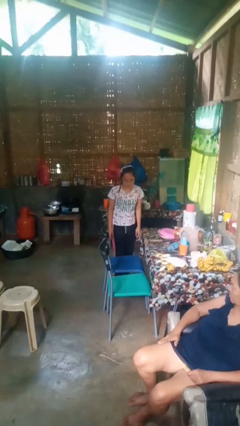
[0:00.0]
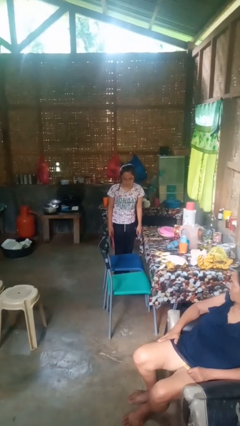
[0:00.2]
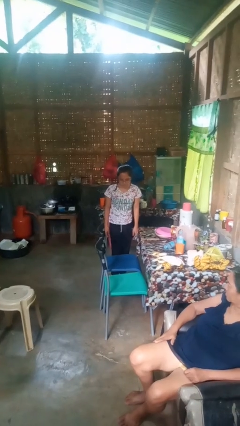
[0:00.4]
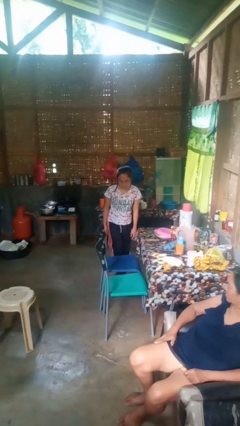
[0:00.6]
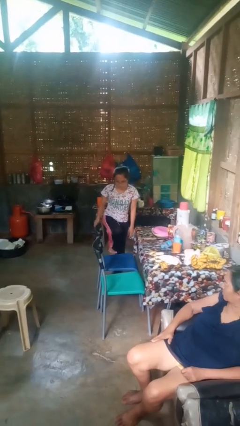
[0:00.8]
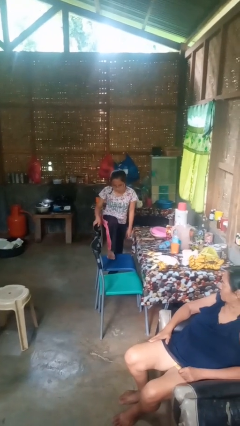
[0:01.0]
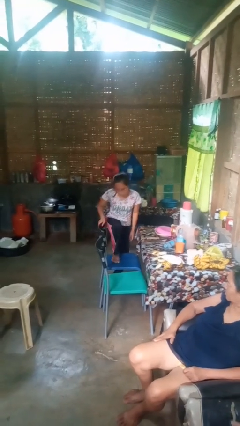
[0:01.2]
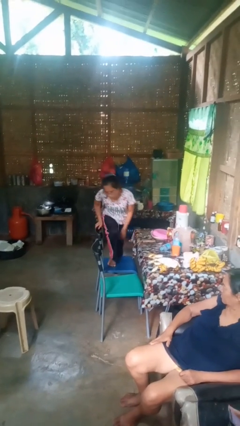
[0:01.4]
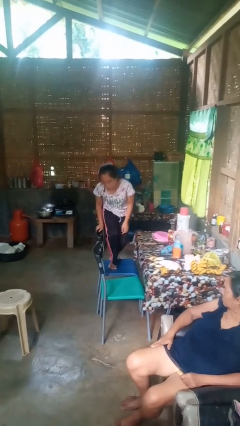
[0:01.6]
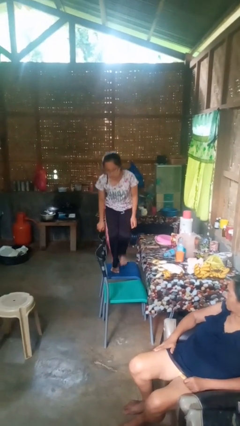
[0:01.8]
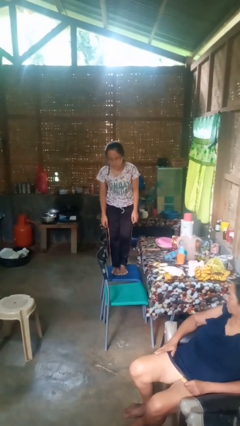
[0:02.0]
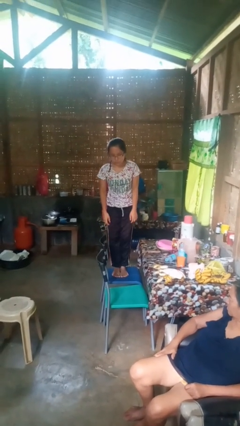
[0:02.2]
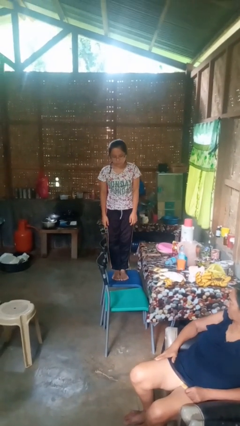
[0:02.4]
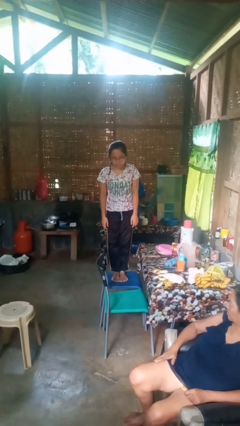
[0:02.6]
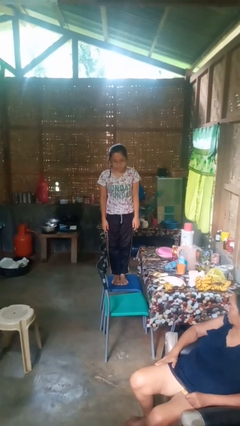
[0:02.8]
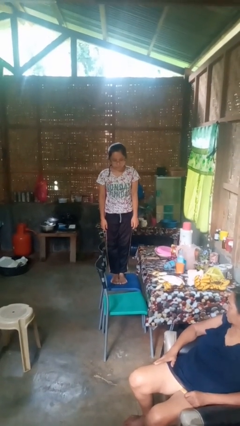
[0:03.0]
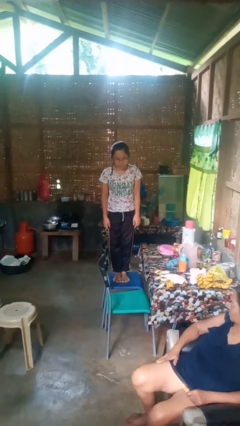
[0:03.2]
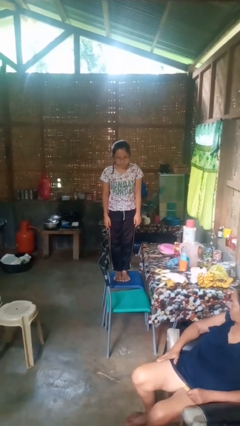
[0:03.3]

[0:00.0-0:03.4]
person climbs on chair

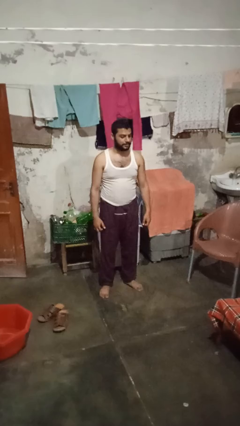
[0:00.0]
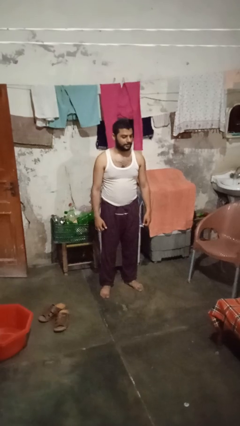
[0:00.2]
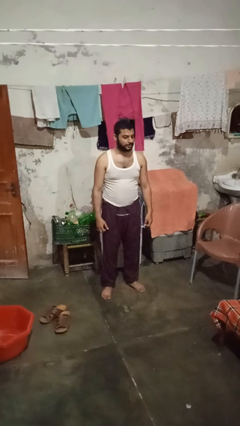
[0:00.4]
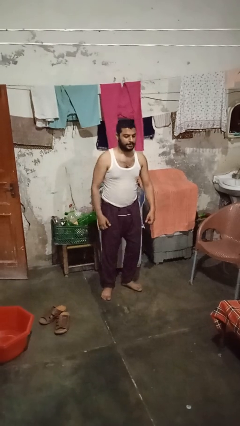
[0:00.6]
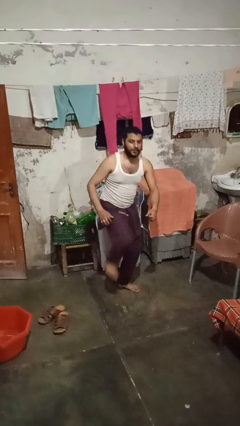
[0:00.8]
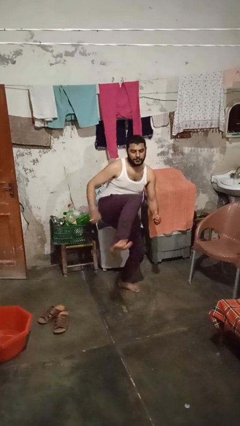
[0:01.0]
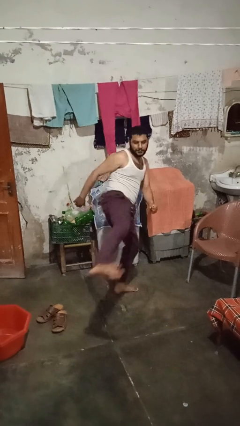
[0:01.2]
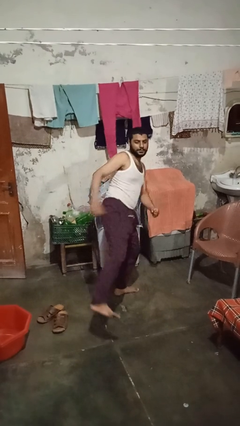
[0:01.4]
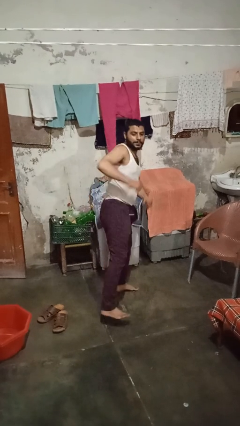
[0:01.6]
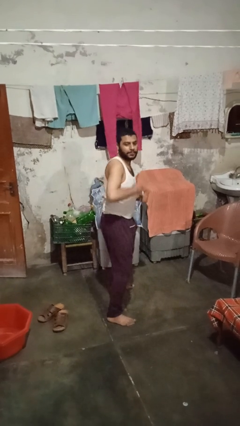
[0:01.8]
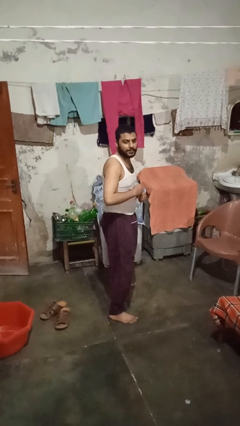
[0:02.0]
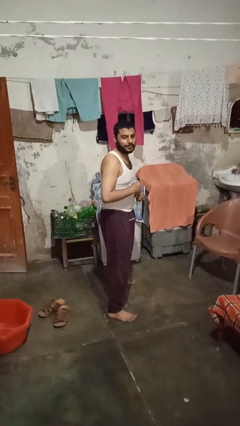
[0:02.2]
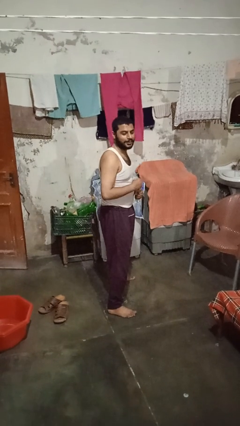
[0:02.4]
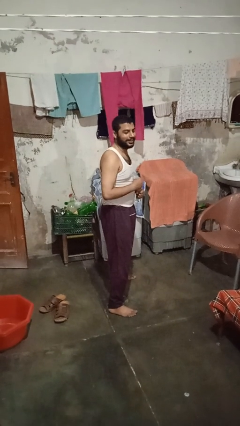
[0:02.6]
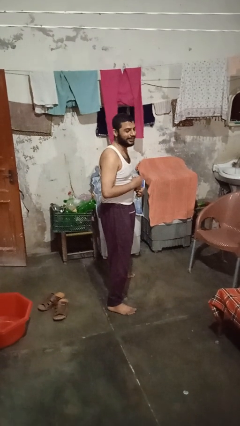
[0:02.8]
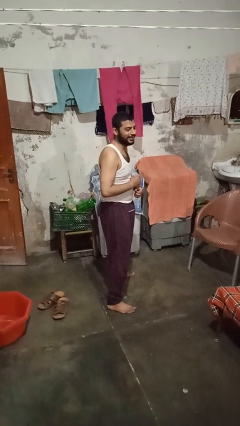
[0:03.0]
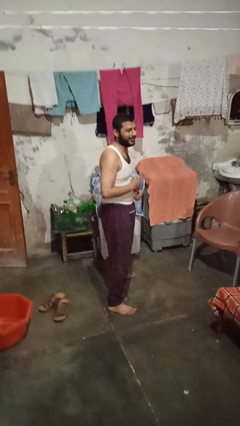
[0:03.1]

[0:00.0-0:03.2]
person karate kicks

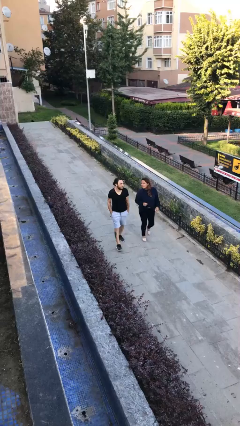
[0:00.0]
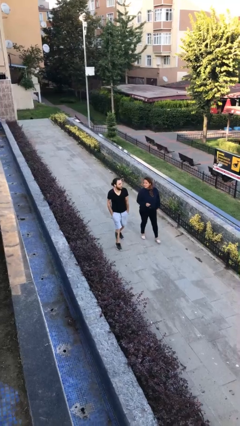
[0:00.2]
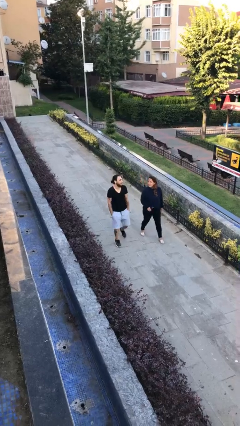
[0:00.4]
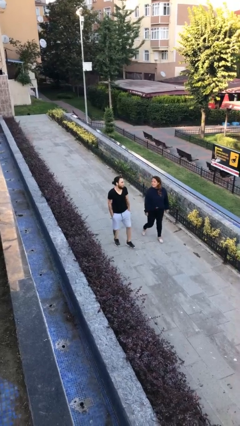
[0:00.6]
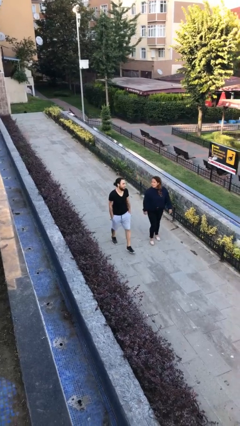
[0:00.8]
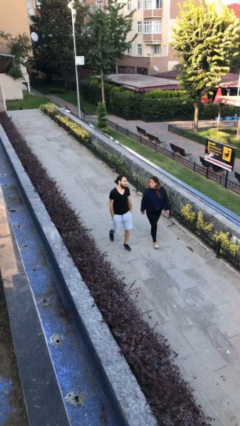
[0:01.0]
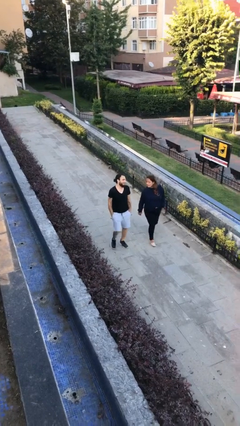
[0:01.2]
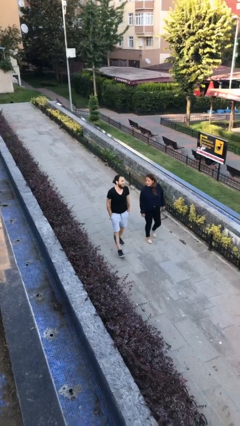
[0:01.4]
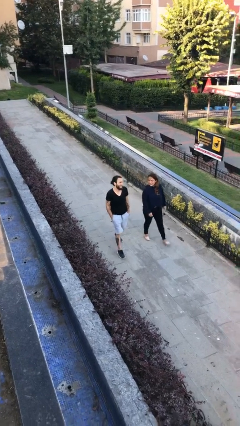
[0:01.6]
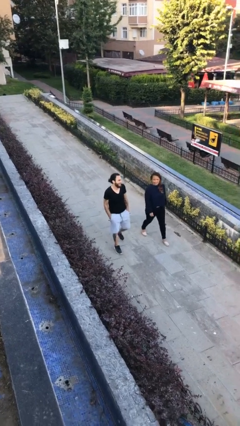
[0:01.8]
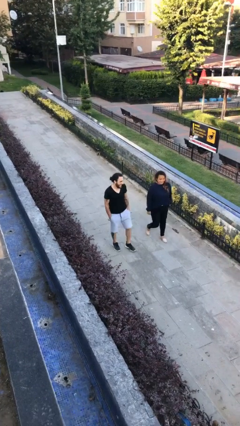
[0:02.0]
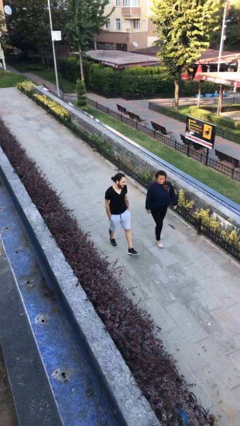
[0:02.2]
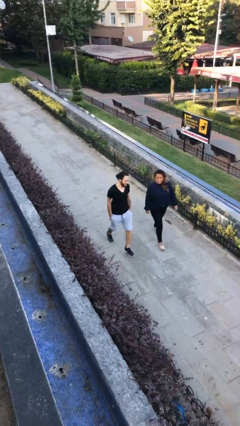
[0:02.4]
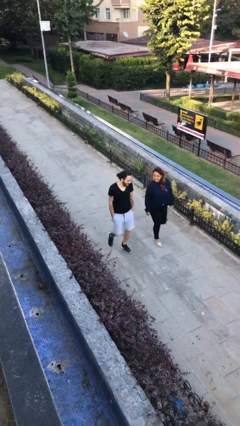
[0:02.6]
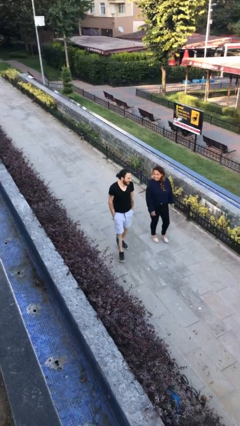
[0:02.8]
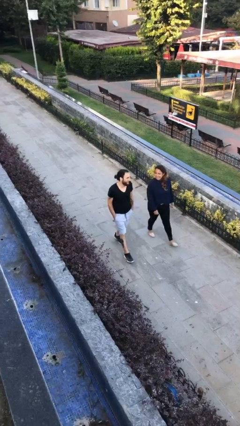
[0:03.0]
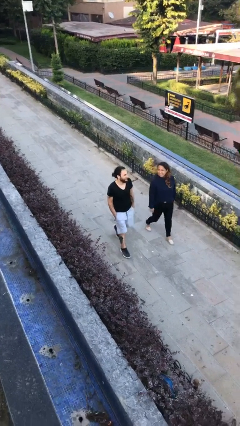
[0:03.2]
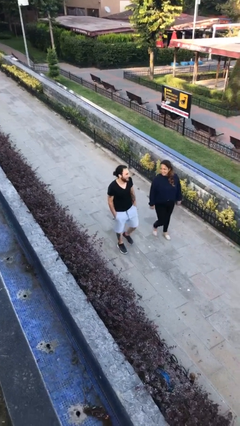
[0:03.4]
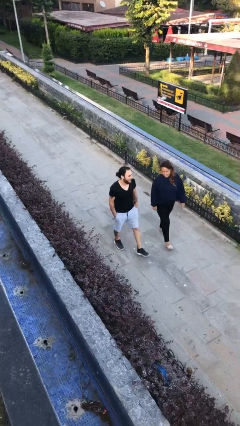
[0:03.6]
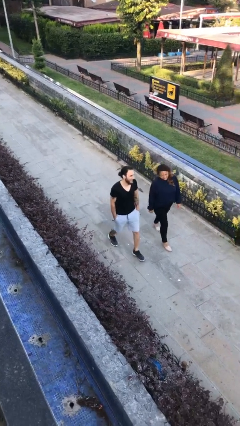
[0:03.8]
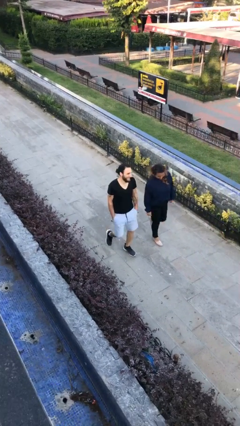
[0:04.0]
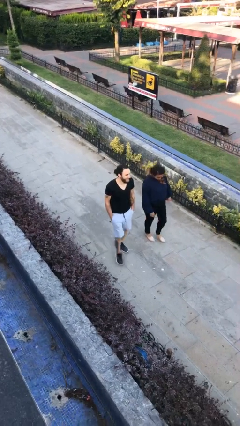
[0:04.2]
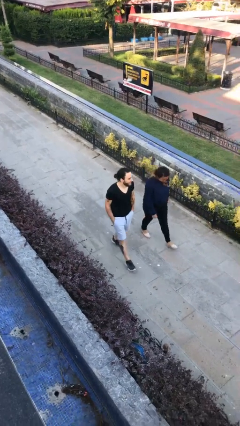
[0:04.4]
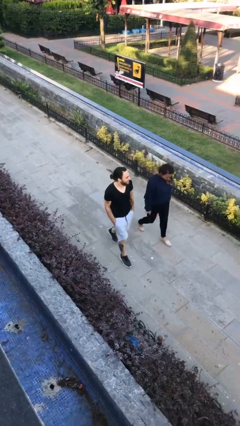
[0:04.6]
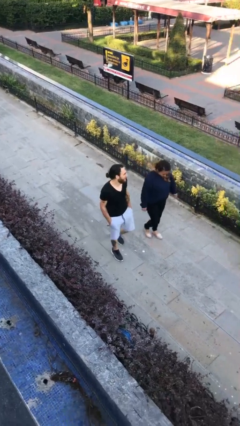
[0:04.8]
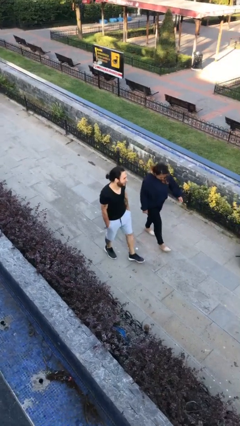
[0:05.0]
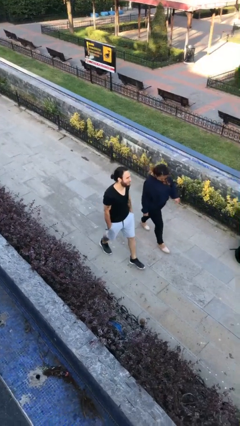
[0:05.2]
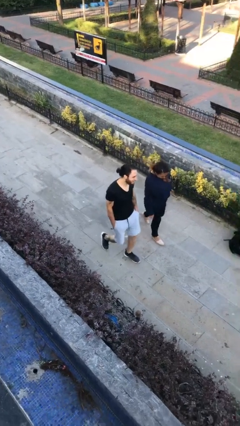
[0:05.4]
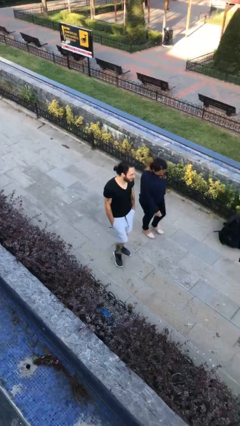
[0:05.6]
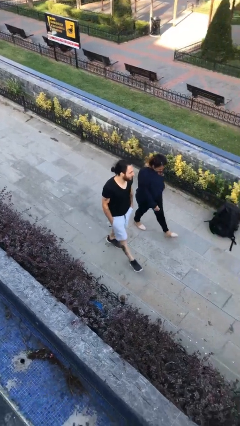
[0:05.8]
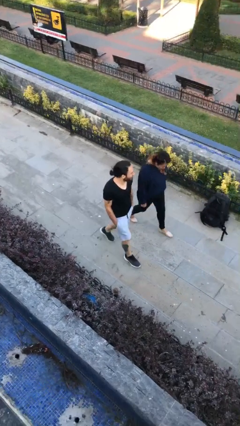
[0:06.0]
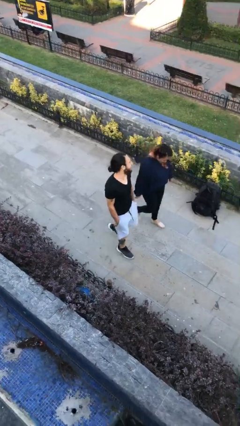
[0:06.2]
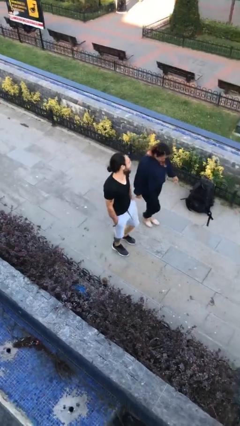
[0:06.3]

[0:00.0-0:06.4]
person talks to person

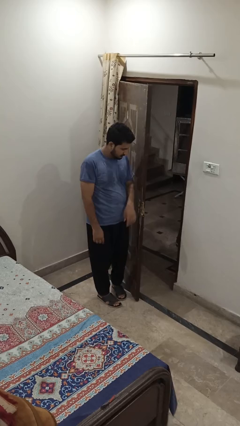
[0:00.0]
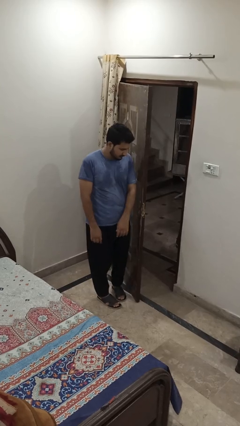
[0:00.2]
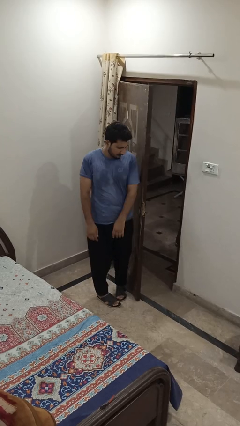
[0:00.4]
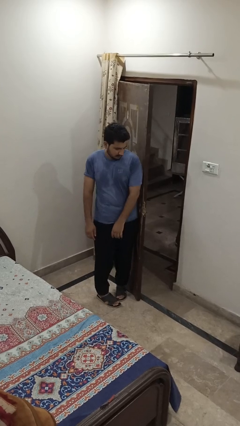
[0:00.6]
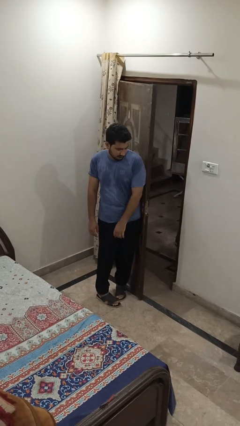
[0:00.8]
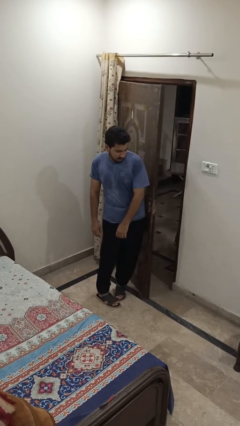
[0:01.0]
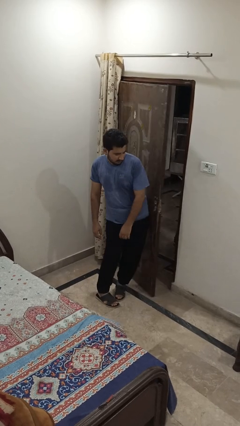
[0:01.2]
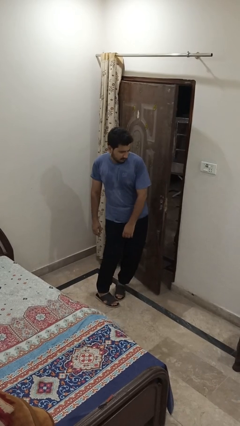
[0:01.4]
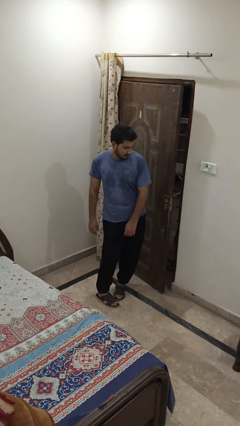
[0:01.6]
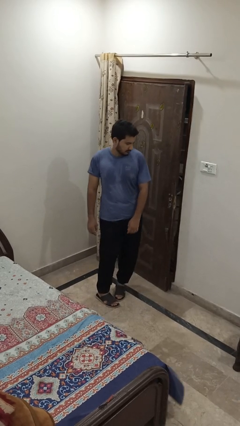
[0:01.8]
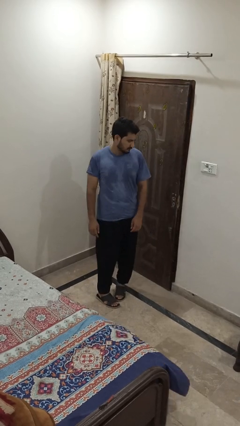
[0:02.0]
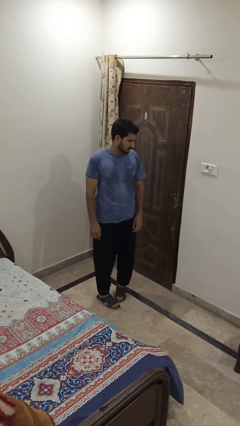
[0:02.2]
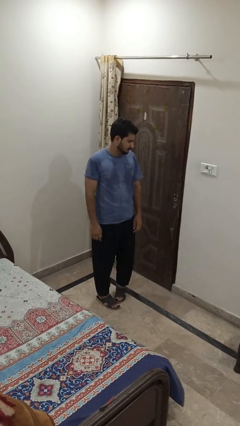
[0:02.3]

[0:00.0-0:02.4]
person closes door with hip

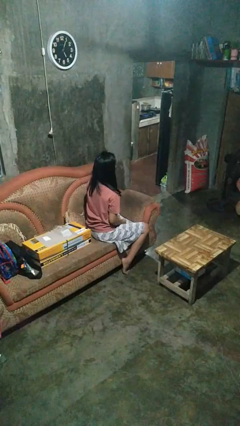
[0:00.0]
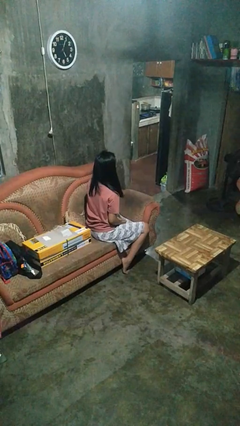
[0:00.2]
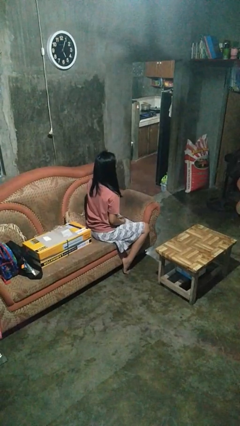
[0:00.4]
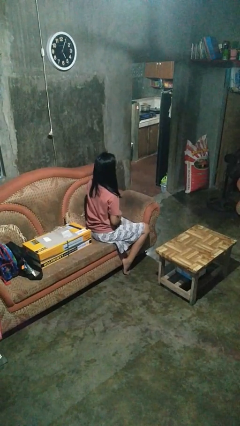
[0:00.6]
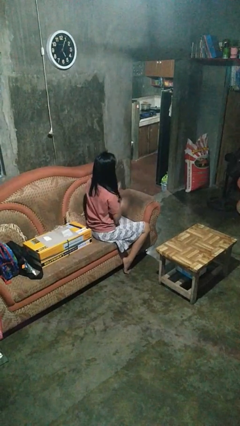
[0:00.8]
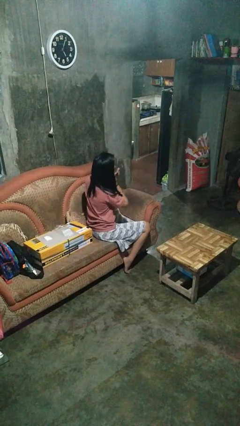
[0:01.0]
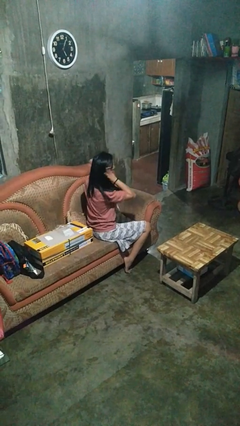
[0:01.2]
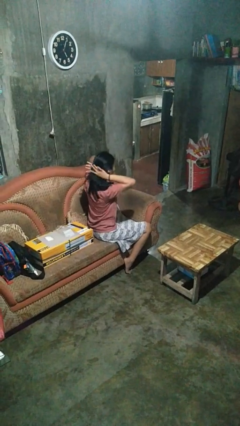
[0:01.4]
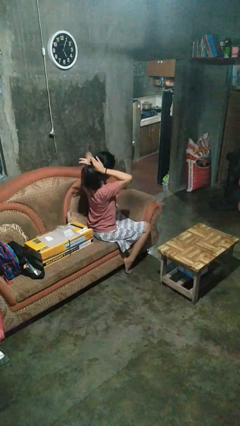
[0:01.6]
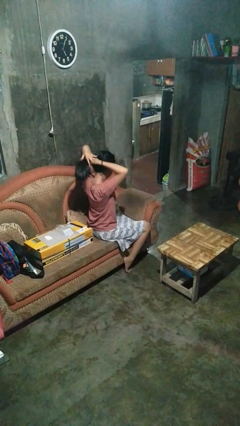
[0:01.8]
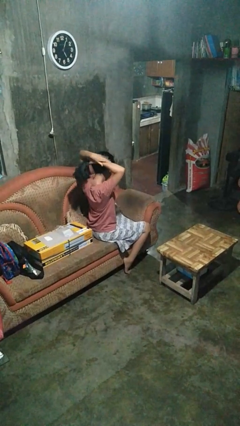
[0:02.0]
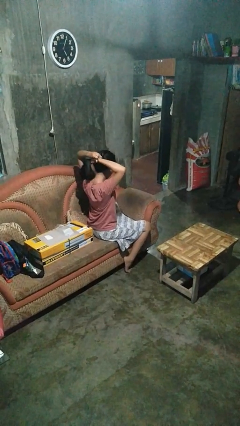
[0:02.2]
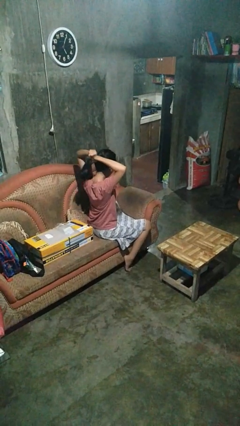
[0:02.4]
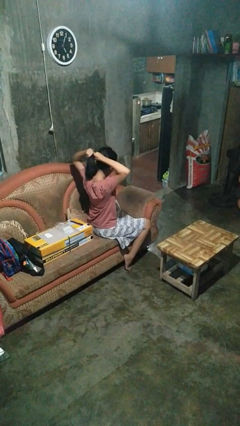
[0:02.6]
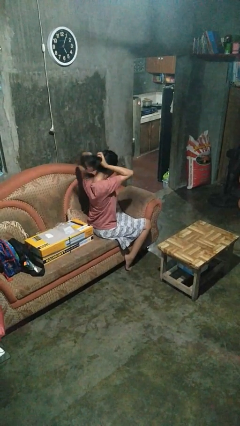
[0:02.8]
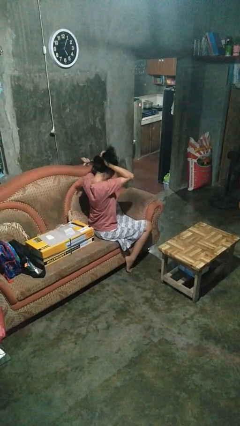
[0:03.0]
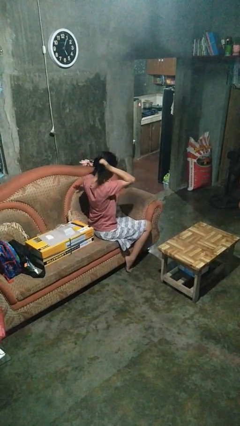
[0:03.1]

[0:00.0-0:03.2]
person puts hair in ponytail
